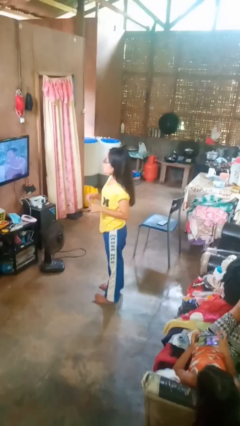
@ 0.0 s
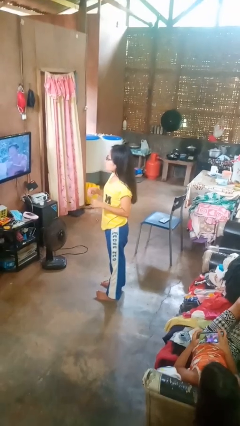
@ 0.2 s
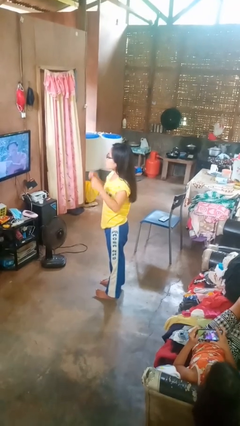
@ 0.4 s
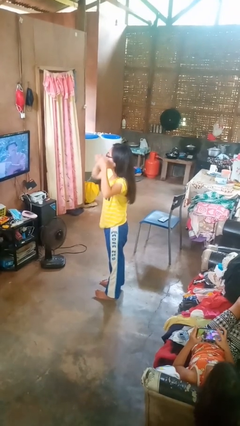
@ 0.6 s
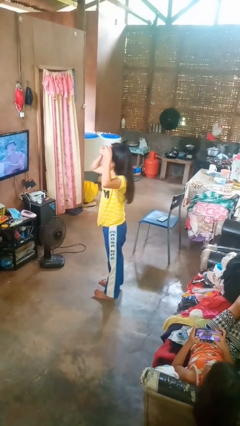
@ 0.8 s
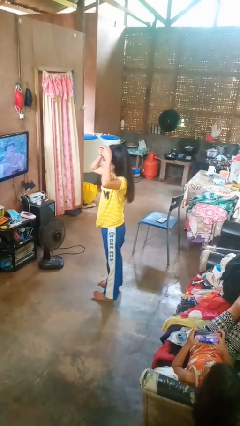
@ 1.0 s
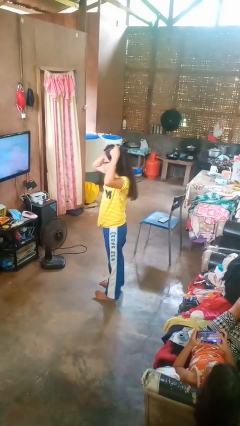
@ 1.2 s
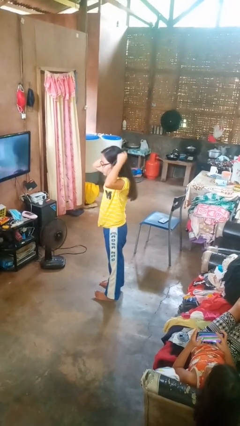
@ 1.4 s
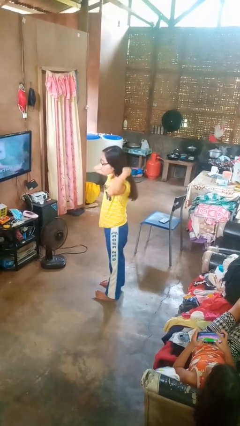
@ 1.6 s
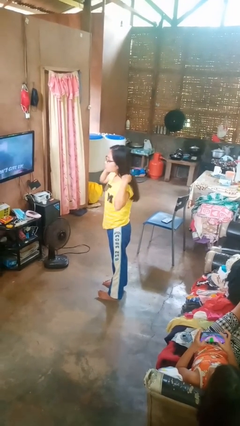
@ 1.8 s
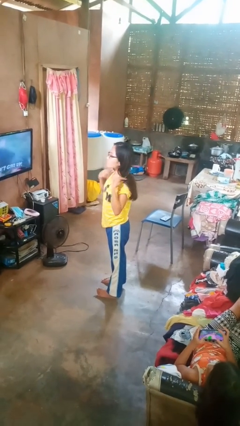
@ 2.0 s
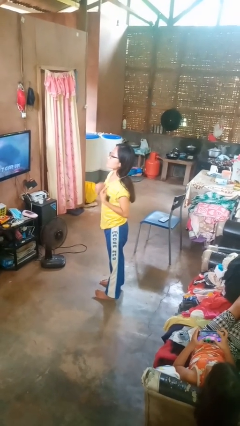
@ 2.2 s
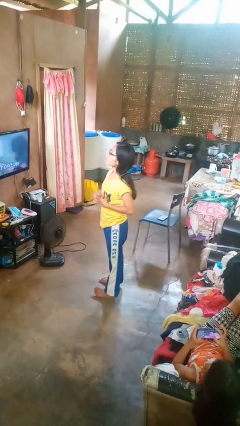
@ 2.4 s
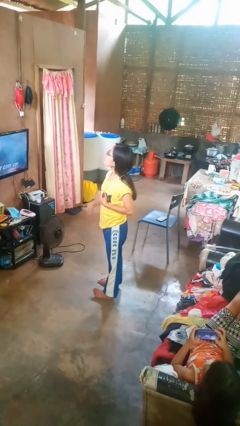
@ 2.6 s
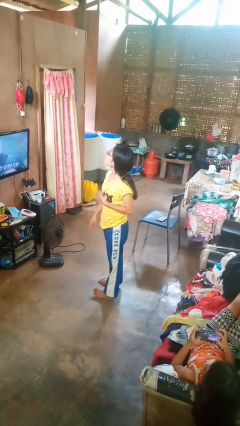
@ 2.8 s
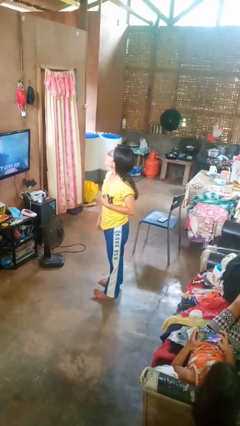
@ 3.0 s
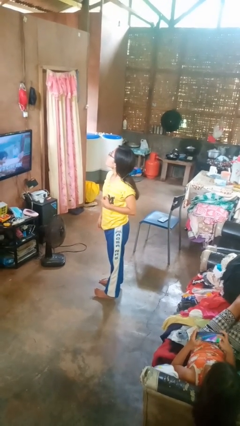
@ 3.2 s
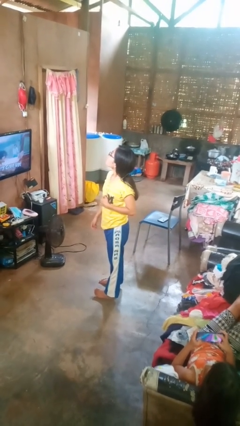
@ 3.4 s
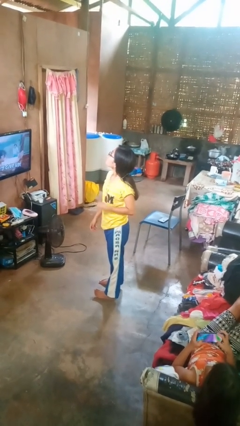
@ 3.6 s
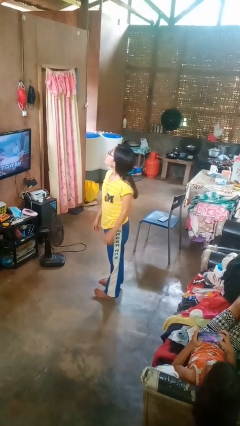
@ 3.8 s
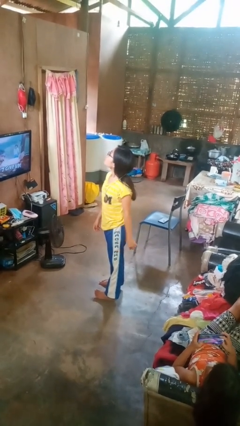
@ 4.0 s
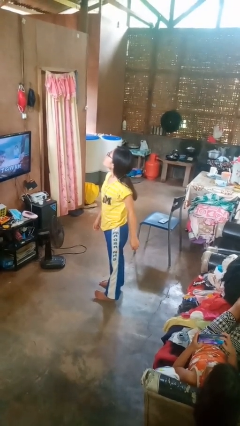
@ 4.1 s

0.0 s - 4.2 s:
person puts on necklace

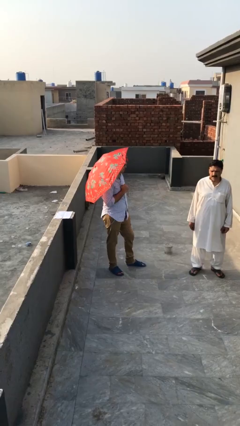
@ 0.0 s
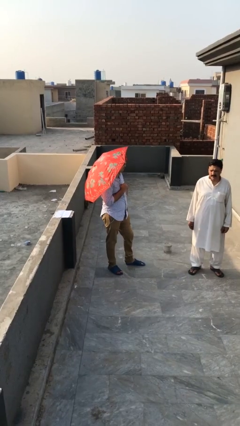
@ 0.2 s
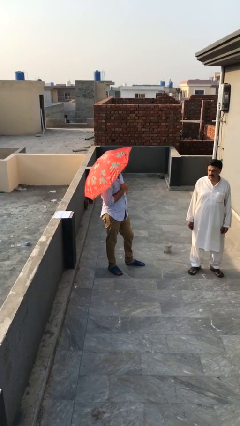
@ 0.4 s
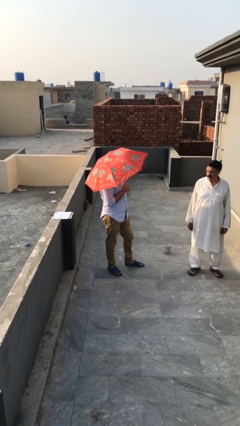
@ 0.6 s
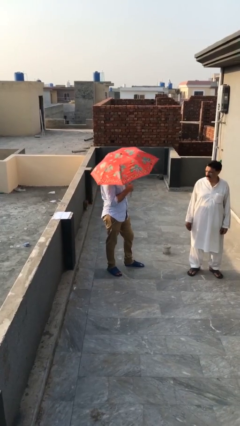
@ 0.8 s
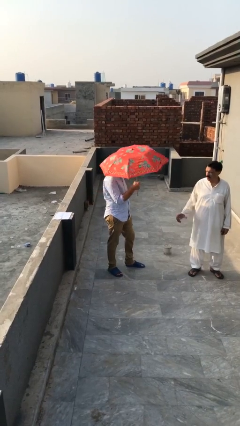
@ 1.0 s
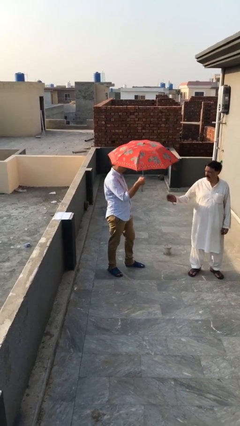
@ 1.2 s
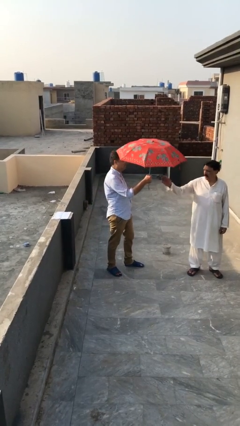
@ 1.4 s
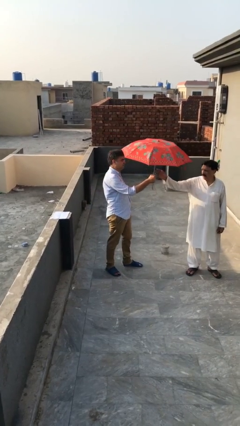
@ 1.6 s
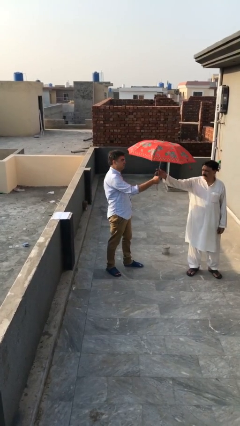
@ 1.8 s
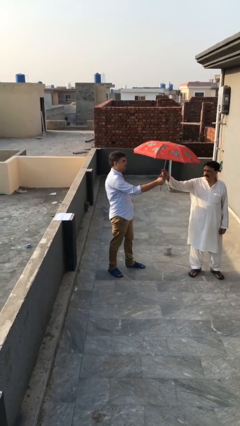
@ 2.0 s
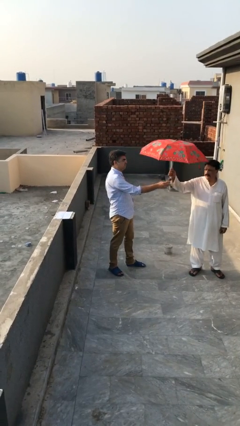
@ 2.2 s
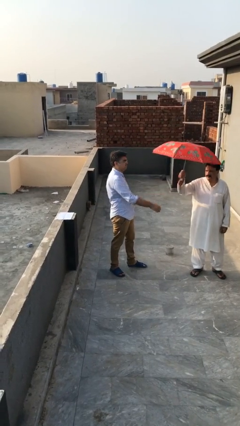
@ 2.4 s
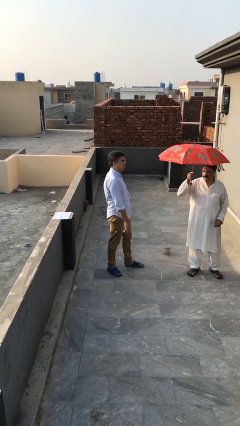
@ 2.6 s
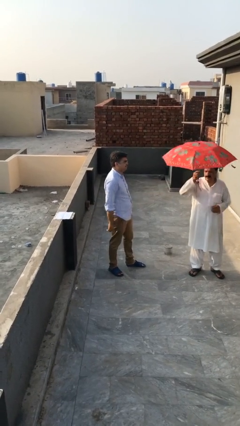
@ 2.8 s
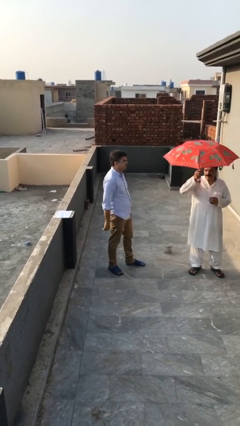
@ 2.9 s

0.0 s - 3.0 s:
person transfers object to person

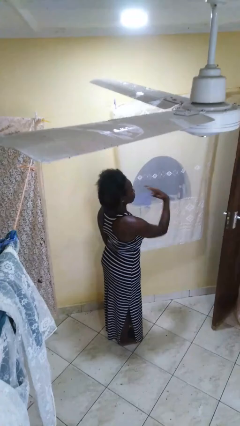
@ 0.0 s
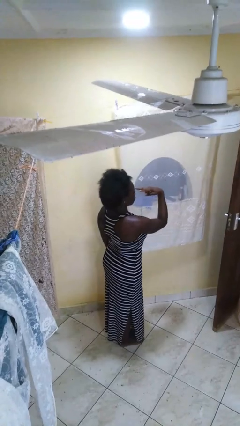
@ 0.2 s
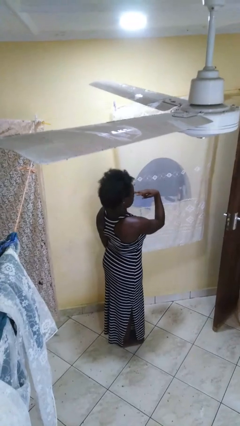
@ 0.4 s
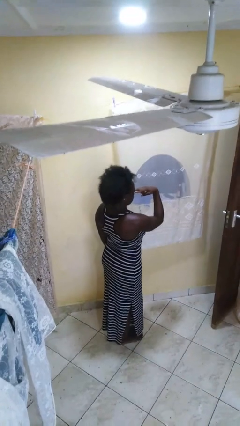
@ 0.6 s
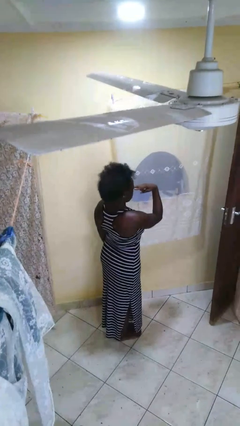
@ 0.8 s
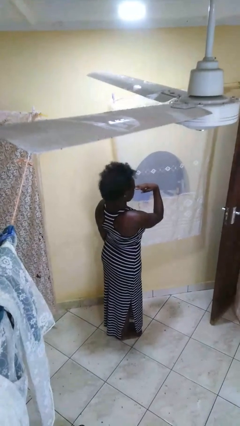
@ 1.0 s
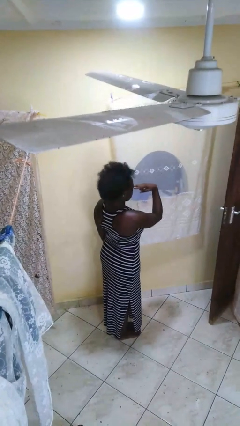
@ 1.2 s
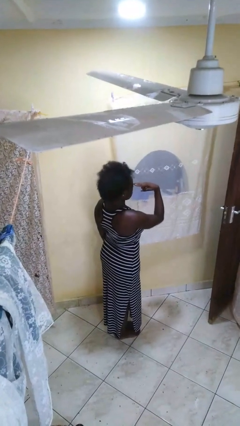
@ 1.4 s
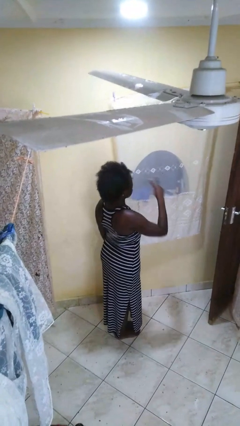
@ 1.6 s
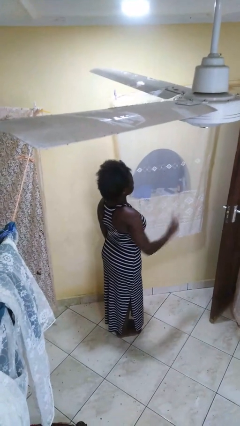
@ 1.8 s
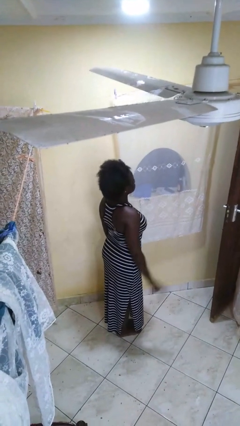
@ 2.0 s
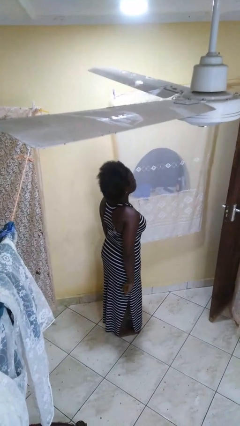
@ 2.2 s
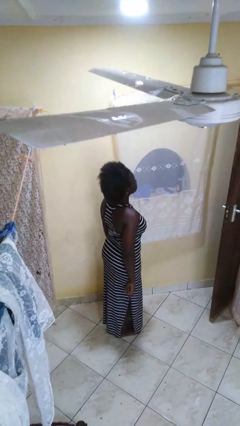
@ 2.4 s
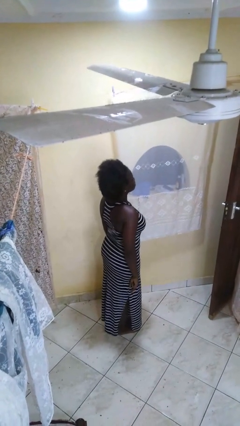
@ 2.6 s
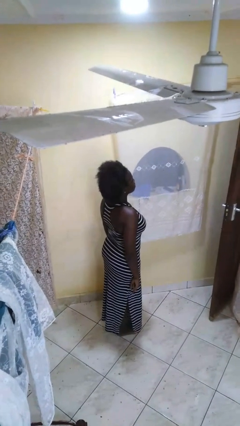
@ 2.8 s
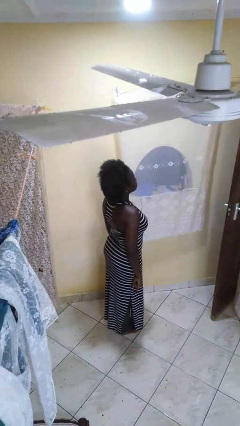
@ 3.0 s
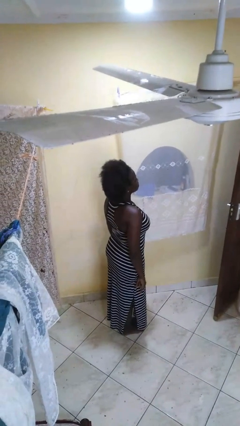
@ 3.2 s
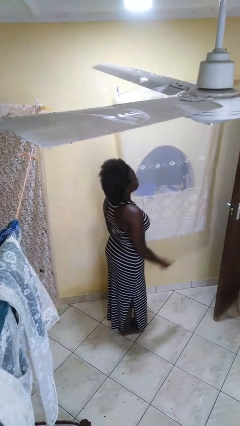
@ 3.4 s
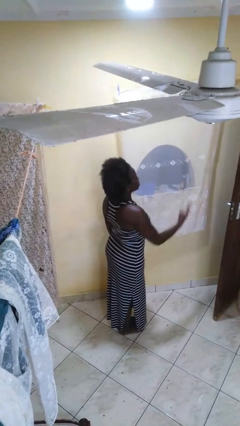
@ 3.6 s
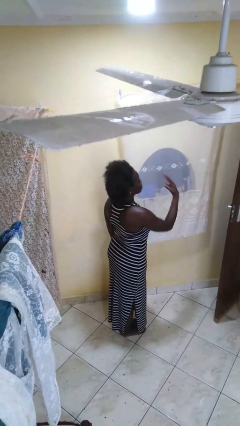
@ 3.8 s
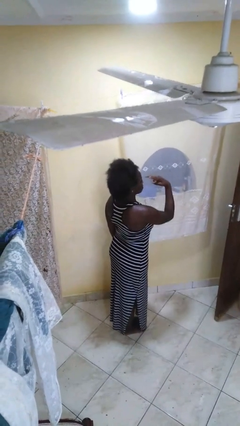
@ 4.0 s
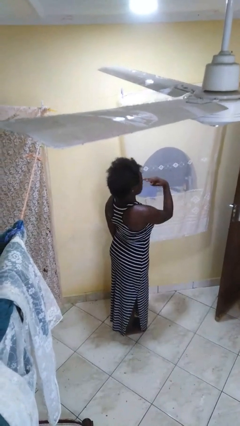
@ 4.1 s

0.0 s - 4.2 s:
person gestures watch closely

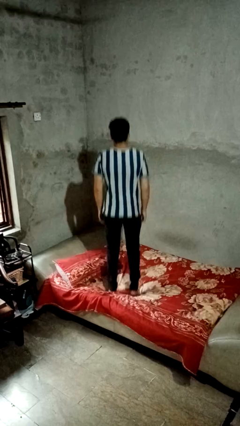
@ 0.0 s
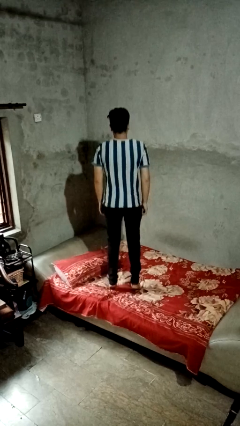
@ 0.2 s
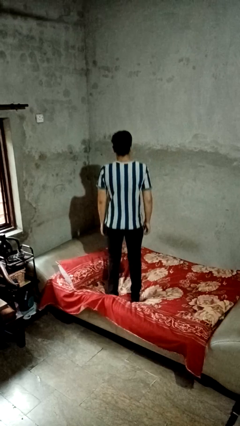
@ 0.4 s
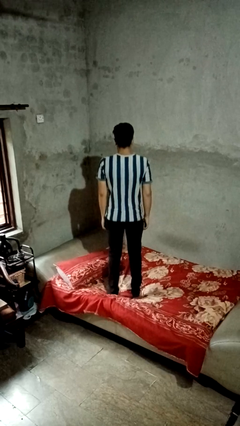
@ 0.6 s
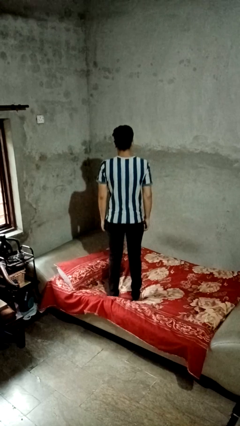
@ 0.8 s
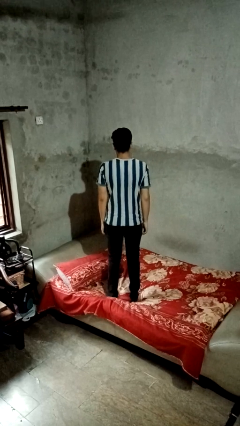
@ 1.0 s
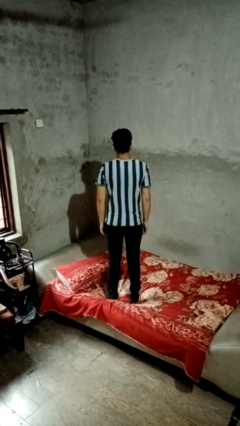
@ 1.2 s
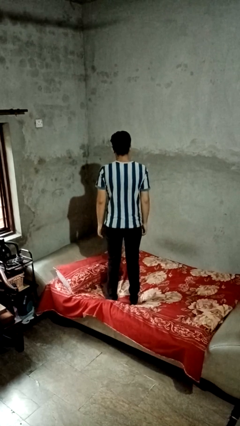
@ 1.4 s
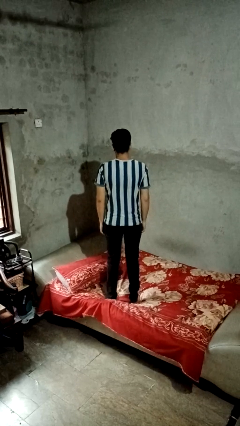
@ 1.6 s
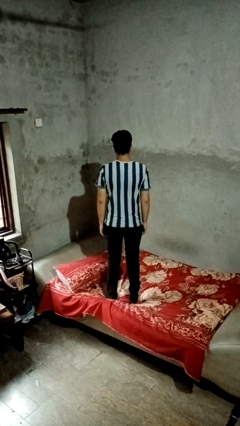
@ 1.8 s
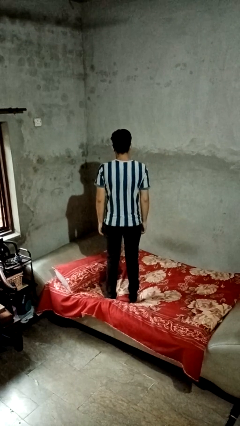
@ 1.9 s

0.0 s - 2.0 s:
person jumps on bed

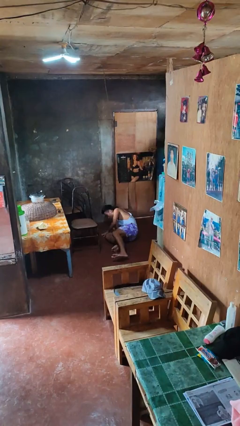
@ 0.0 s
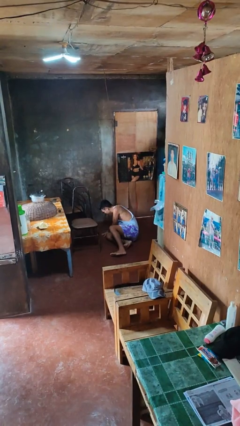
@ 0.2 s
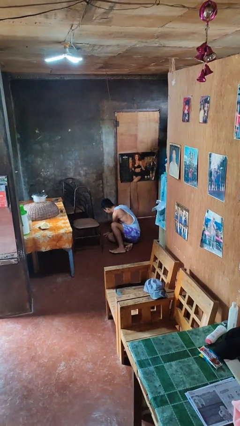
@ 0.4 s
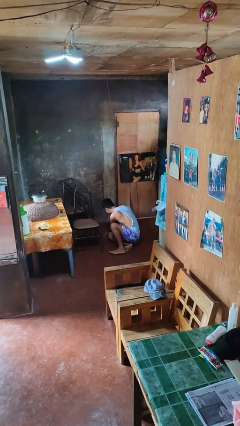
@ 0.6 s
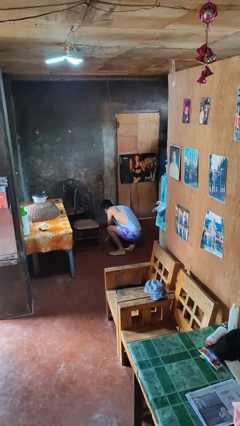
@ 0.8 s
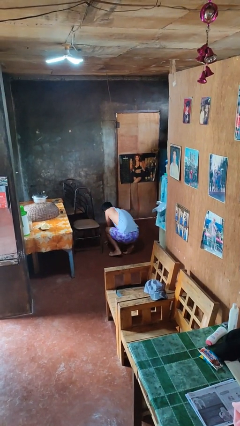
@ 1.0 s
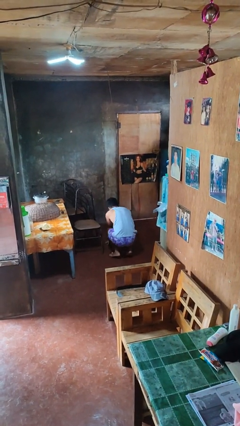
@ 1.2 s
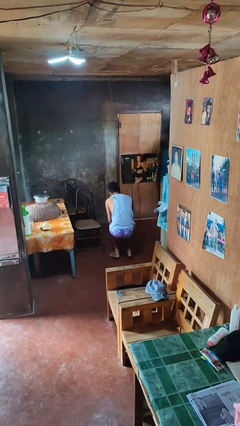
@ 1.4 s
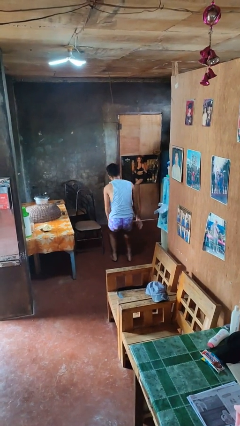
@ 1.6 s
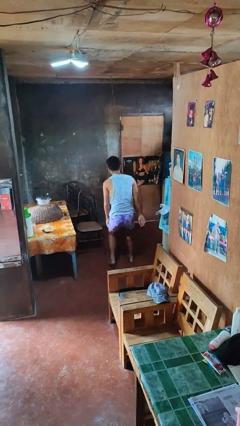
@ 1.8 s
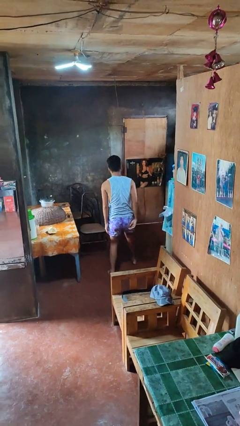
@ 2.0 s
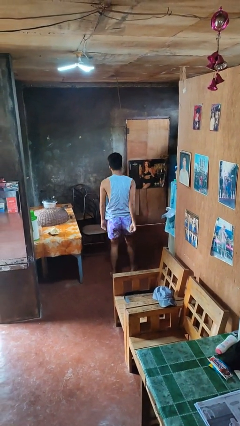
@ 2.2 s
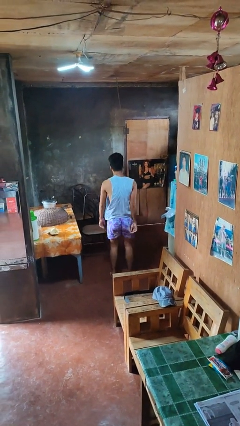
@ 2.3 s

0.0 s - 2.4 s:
person stands up from floor

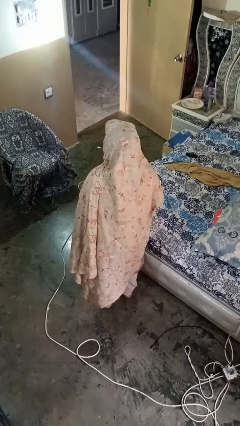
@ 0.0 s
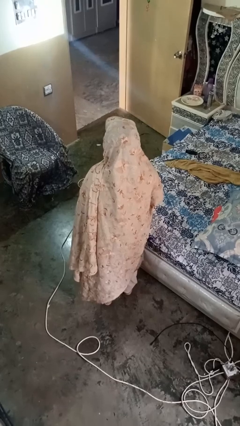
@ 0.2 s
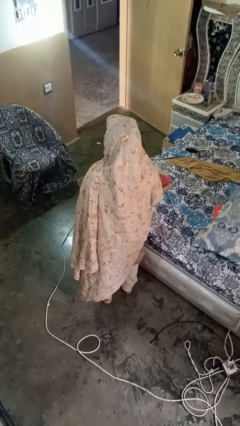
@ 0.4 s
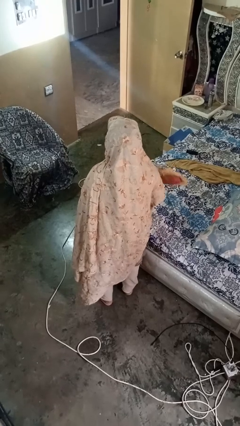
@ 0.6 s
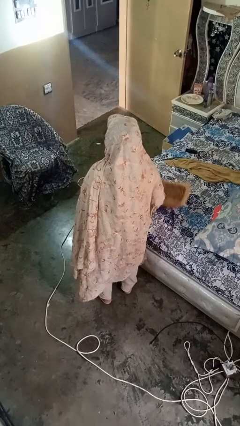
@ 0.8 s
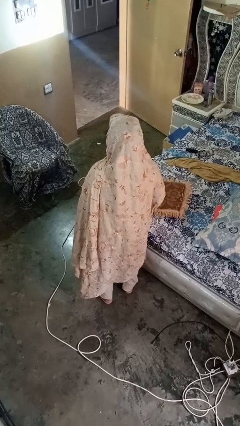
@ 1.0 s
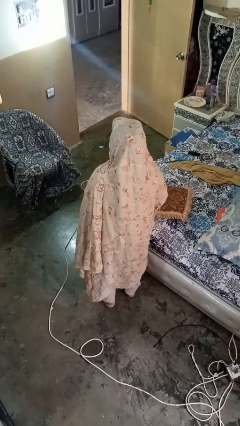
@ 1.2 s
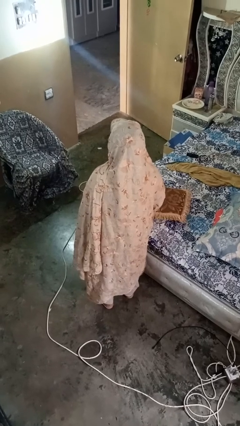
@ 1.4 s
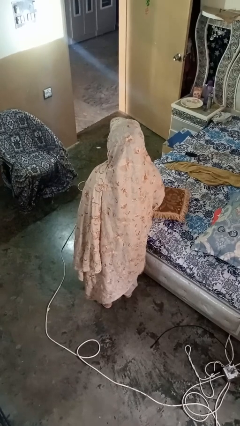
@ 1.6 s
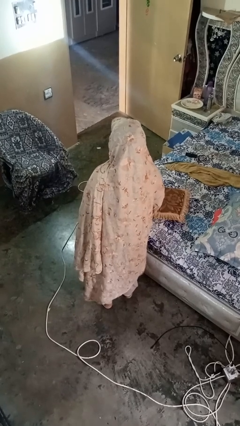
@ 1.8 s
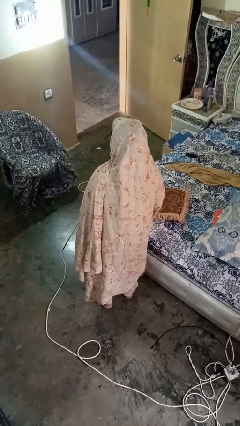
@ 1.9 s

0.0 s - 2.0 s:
person puts down object on bed
